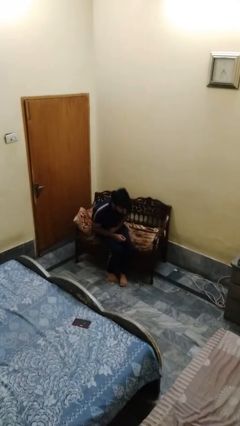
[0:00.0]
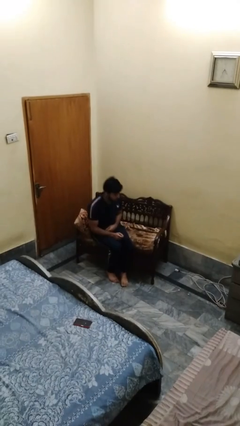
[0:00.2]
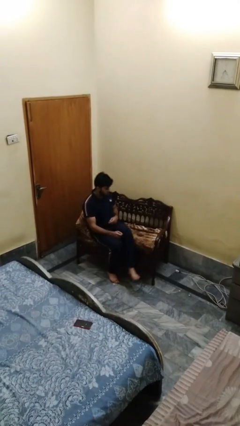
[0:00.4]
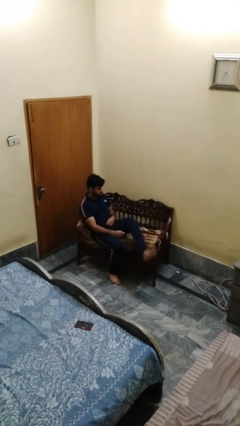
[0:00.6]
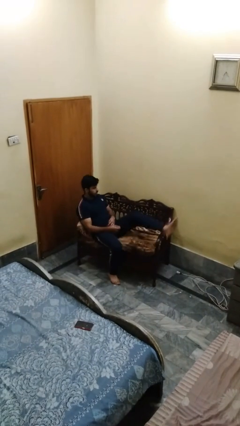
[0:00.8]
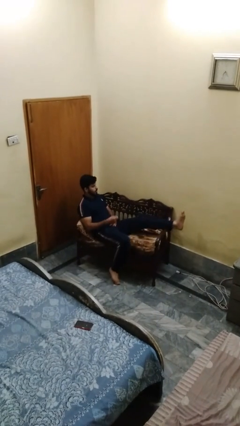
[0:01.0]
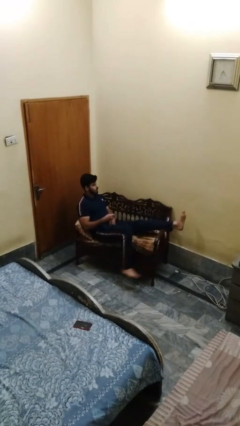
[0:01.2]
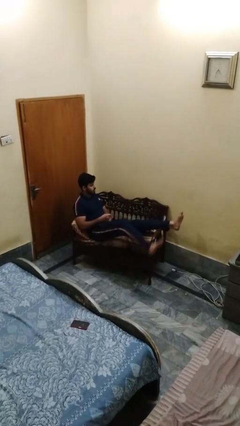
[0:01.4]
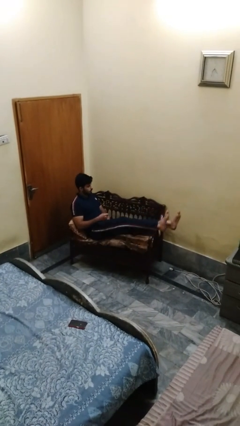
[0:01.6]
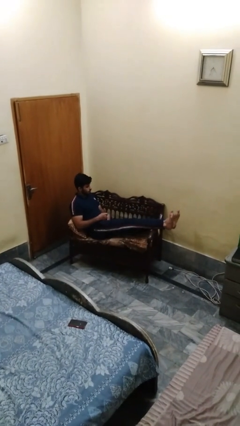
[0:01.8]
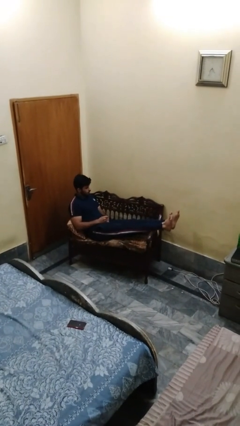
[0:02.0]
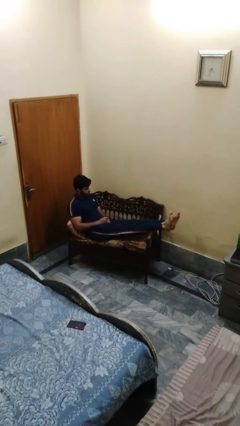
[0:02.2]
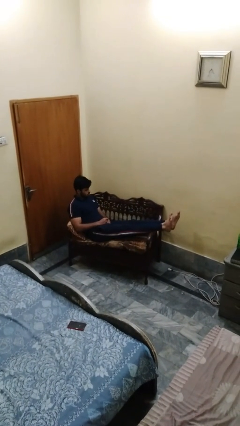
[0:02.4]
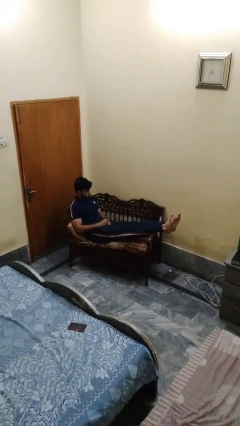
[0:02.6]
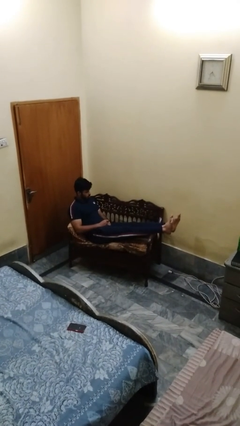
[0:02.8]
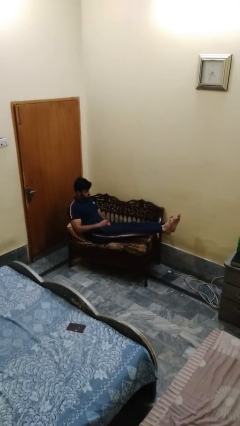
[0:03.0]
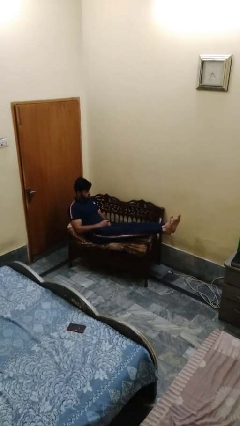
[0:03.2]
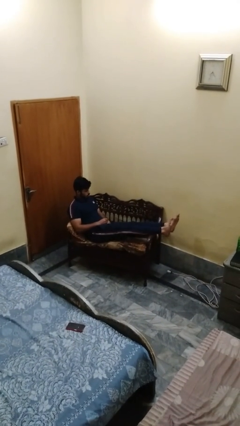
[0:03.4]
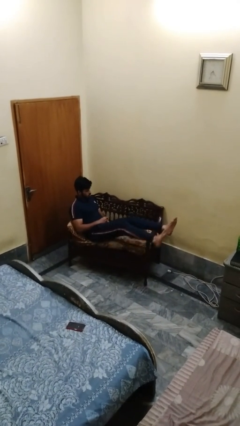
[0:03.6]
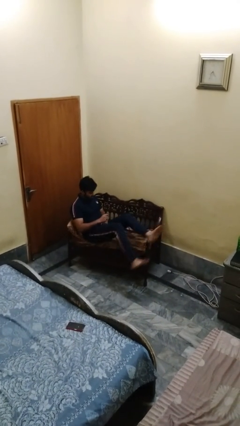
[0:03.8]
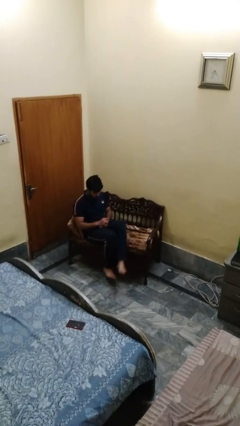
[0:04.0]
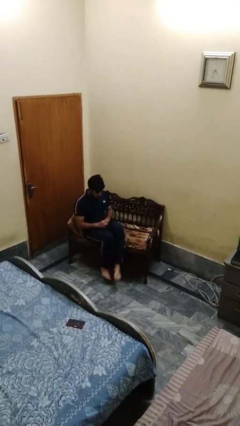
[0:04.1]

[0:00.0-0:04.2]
person lies down on couch

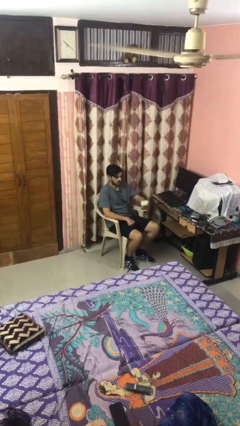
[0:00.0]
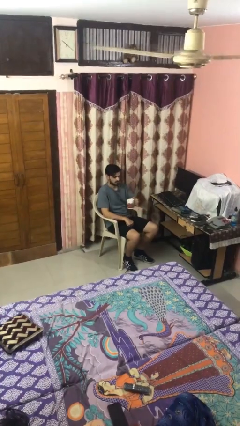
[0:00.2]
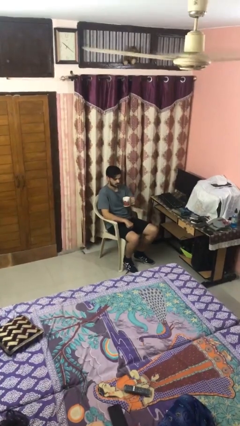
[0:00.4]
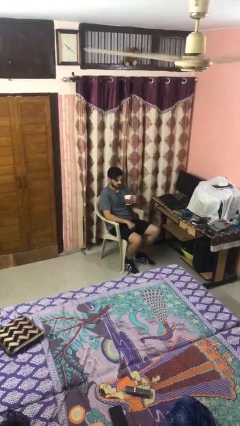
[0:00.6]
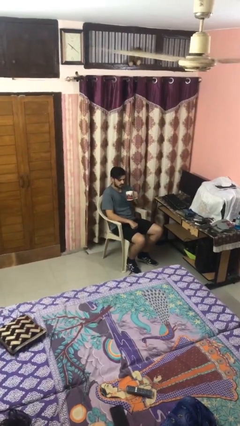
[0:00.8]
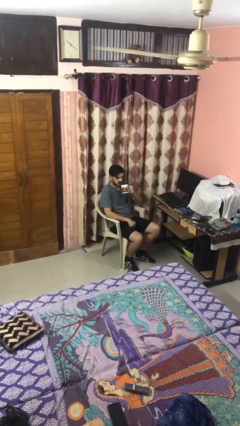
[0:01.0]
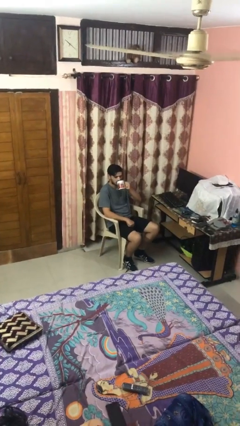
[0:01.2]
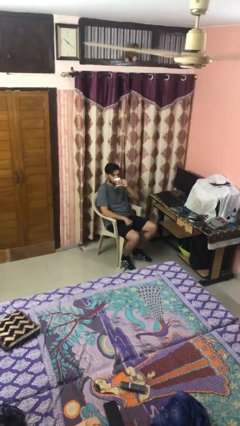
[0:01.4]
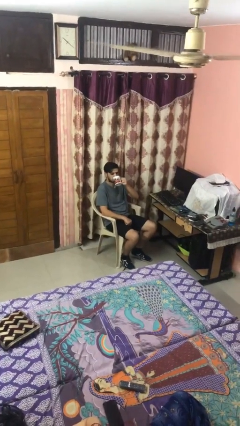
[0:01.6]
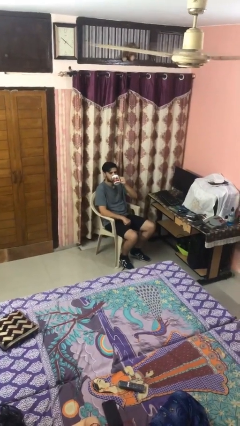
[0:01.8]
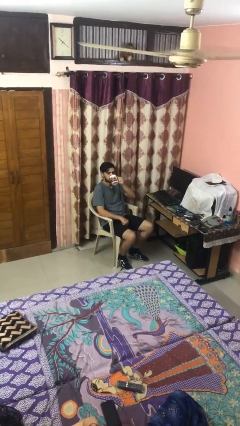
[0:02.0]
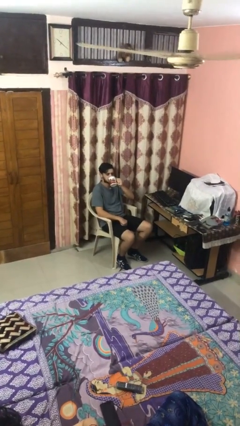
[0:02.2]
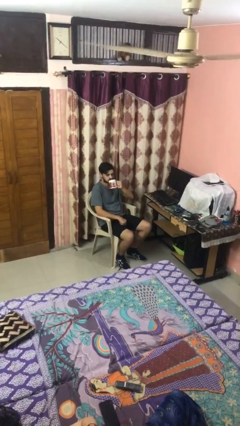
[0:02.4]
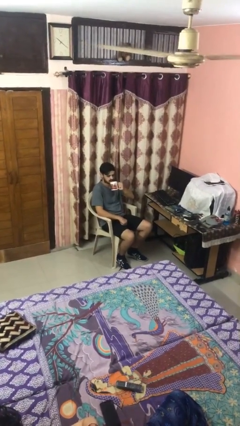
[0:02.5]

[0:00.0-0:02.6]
person drinks from mug

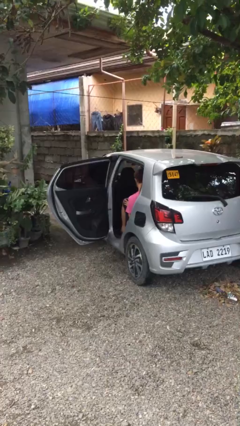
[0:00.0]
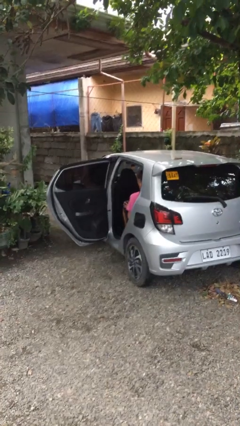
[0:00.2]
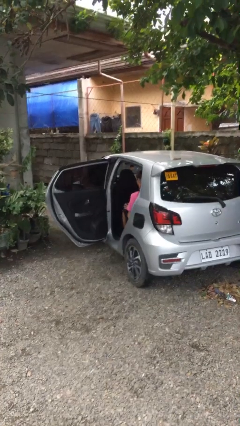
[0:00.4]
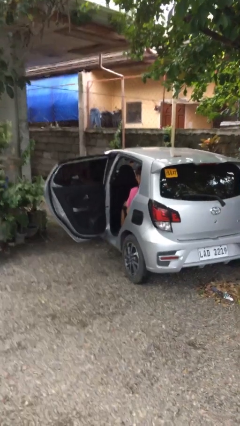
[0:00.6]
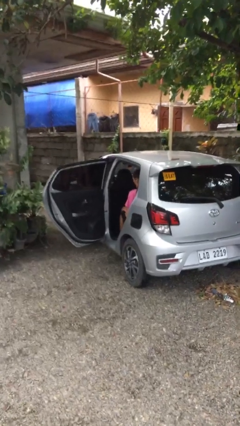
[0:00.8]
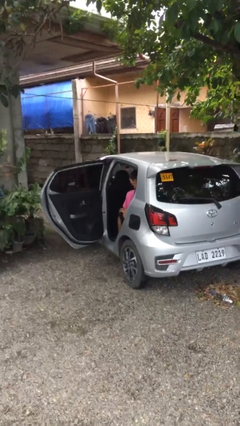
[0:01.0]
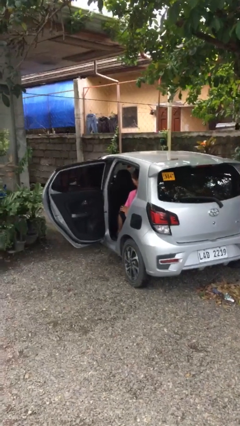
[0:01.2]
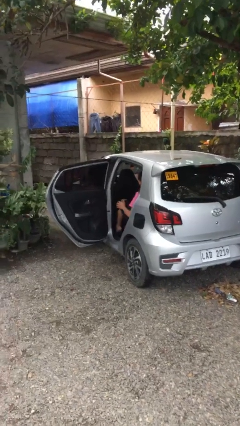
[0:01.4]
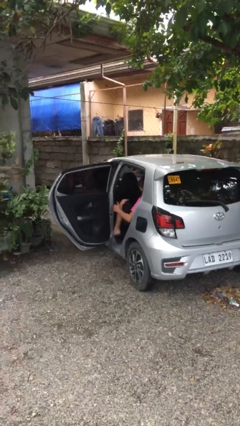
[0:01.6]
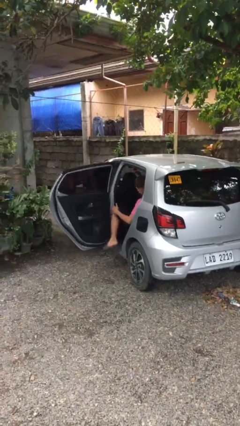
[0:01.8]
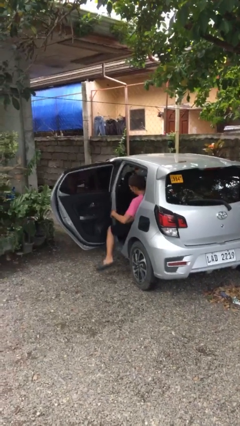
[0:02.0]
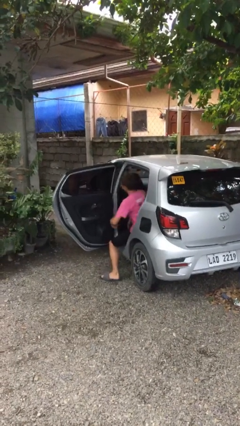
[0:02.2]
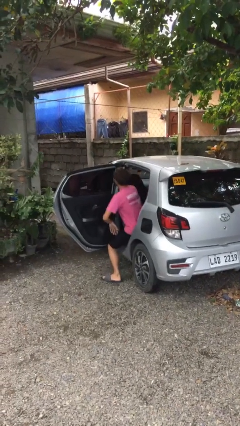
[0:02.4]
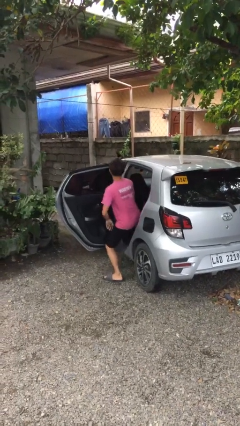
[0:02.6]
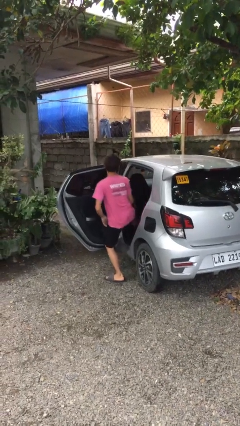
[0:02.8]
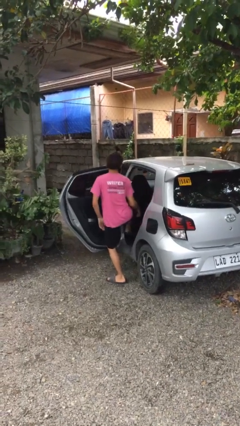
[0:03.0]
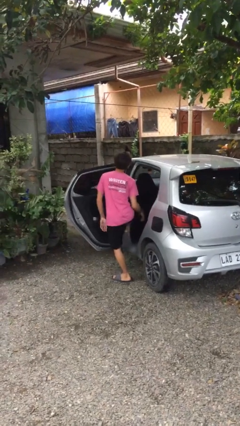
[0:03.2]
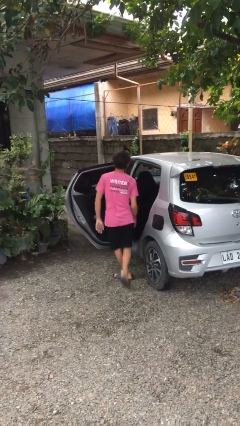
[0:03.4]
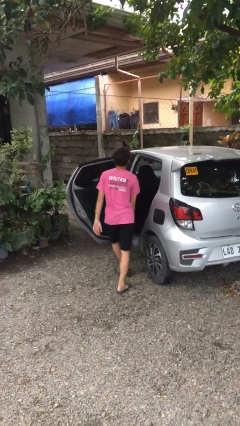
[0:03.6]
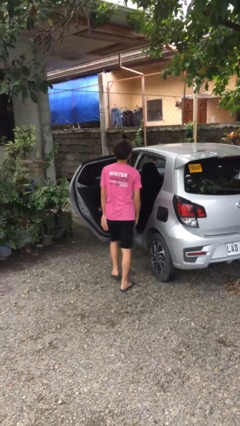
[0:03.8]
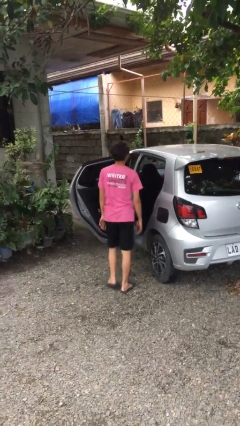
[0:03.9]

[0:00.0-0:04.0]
person exits car

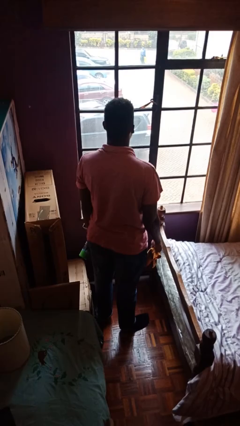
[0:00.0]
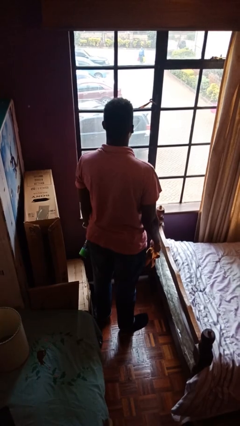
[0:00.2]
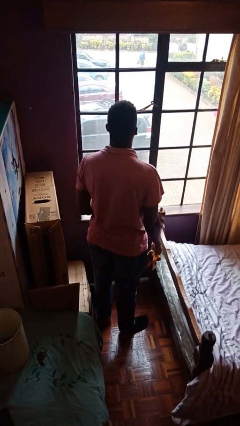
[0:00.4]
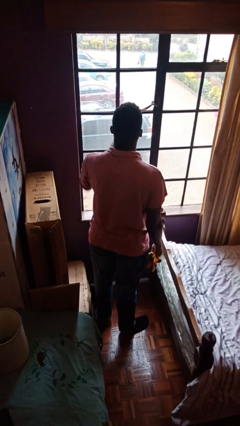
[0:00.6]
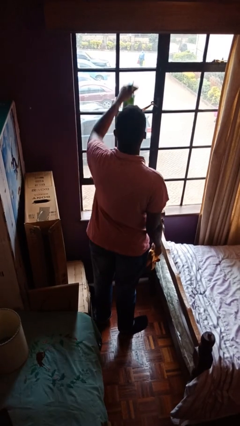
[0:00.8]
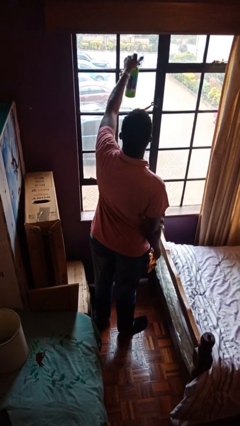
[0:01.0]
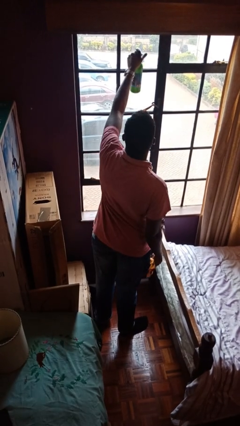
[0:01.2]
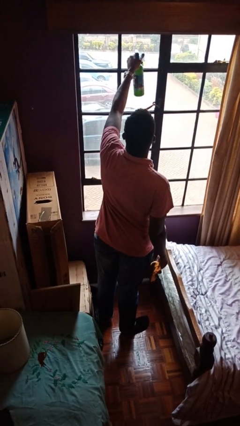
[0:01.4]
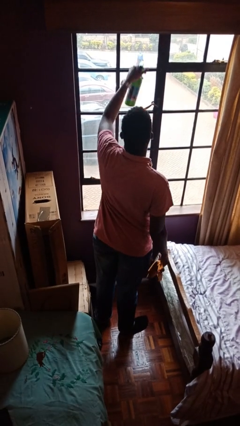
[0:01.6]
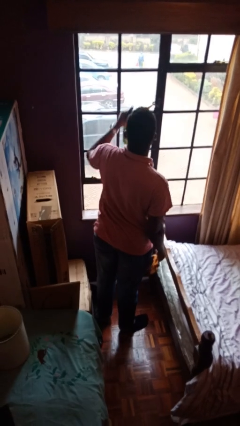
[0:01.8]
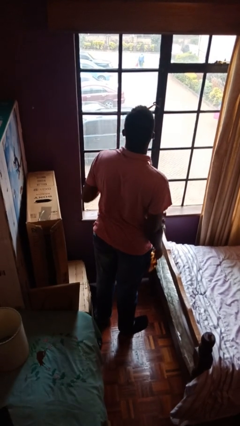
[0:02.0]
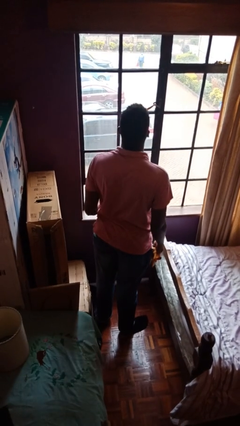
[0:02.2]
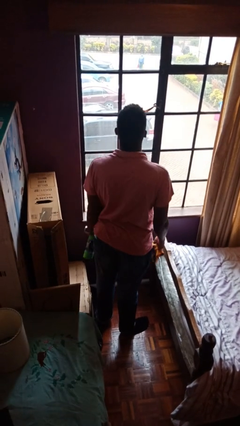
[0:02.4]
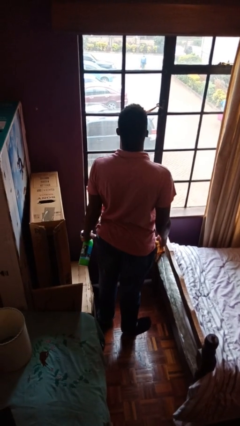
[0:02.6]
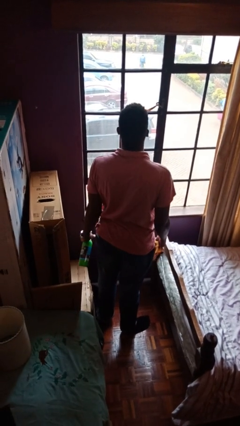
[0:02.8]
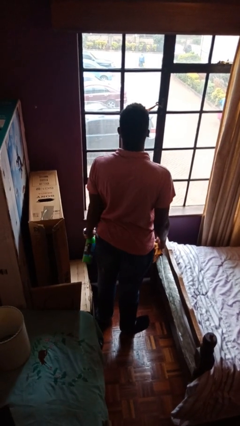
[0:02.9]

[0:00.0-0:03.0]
person sprays from bottle

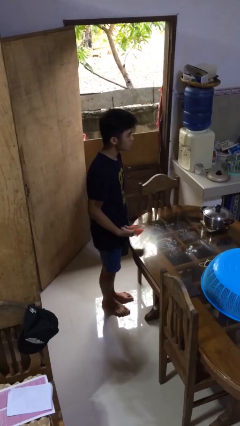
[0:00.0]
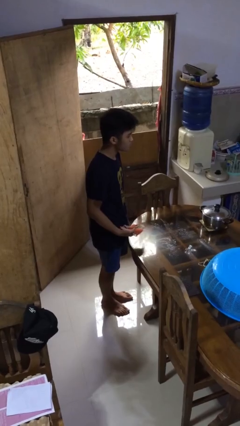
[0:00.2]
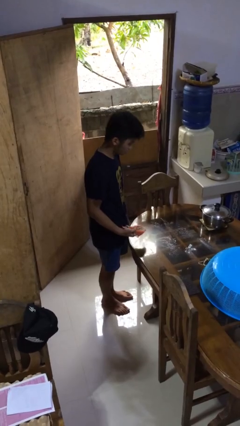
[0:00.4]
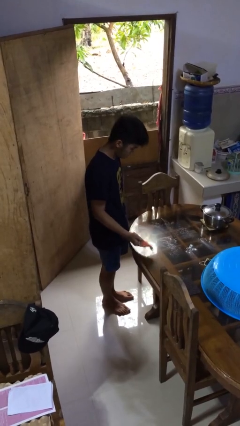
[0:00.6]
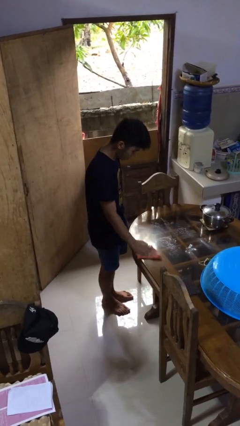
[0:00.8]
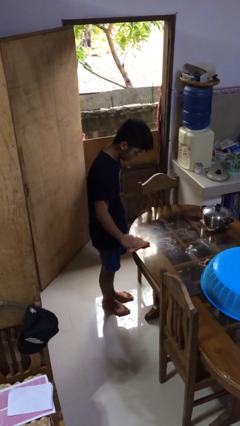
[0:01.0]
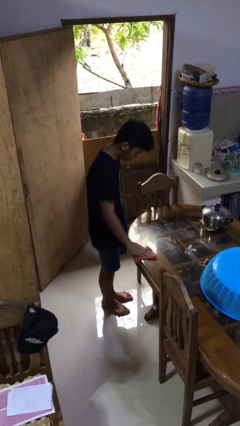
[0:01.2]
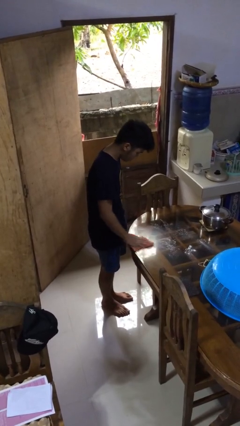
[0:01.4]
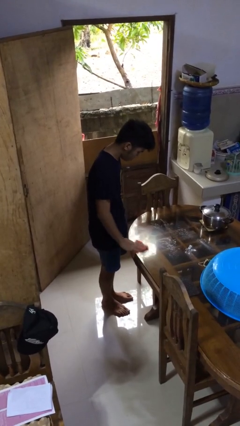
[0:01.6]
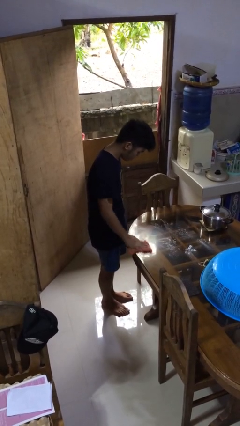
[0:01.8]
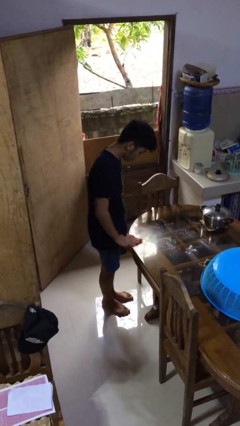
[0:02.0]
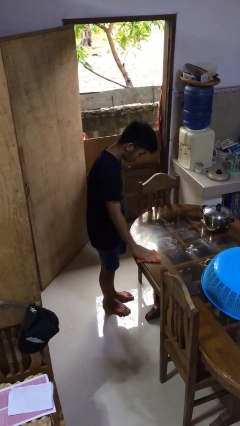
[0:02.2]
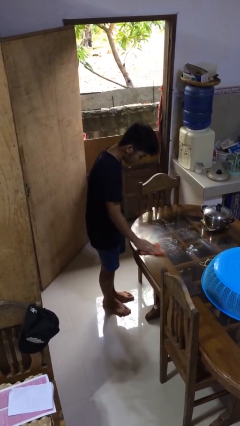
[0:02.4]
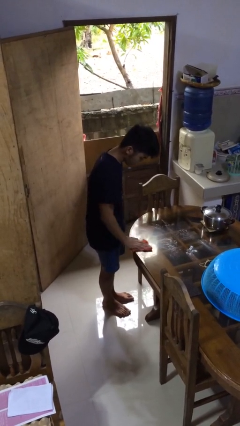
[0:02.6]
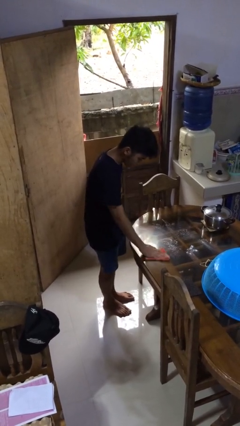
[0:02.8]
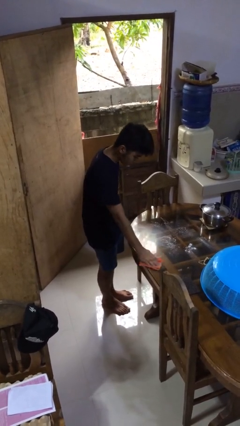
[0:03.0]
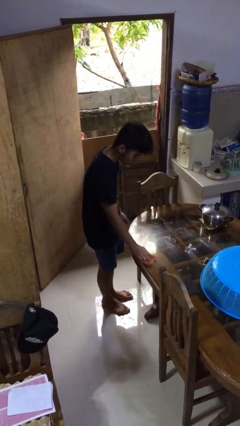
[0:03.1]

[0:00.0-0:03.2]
person cleans table with rag
